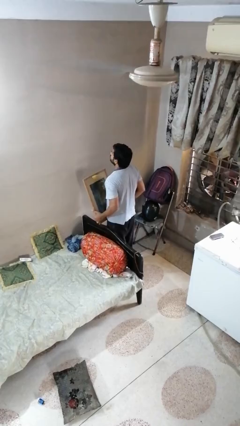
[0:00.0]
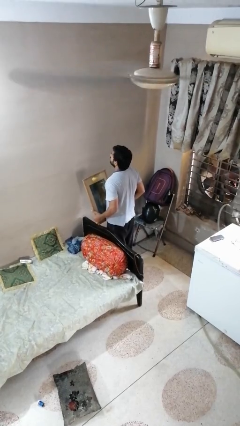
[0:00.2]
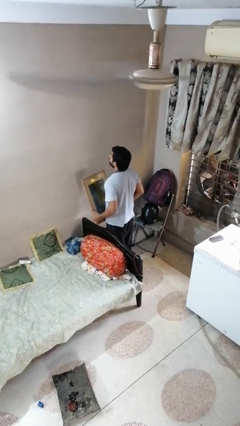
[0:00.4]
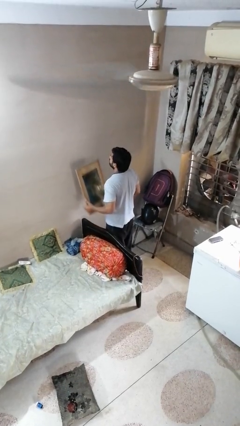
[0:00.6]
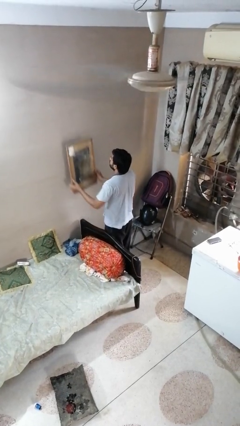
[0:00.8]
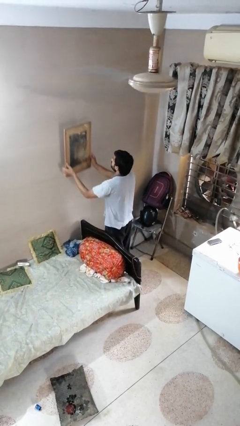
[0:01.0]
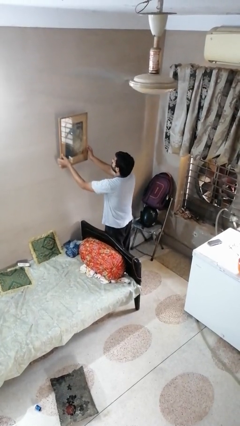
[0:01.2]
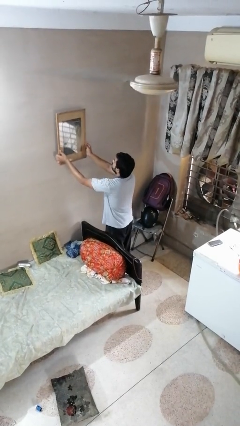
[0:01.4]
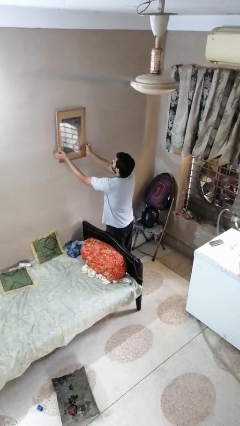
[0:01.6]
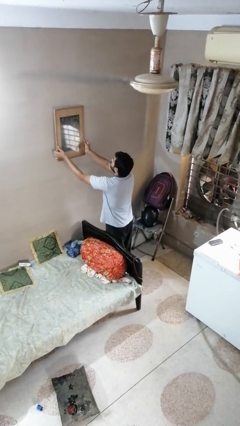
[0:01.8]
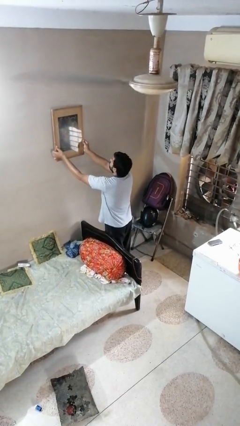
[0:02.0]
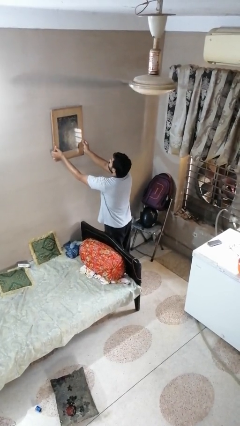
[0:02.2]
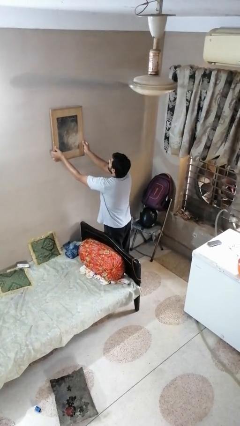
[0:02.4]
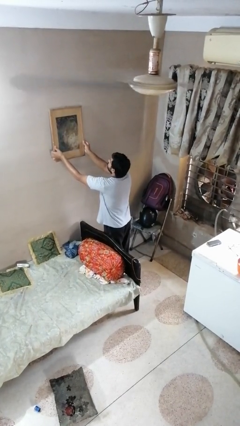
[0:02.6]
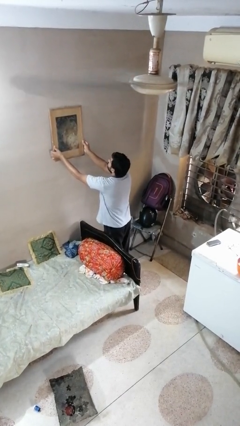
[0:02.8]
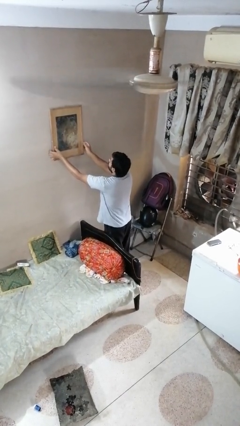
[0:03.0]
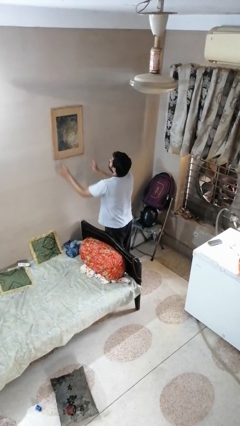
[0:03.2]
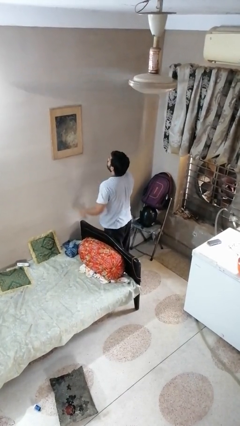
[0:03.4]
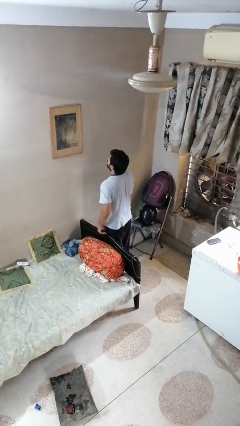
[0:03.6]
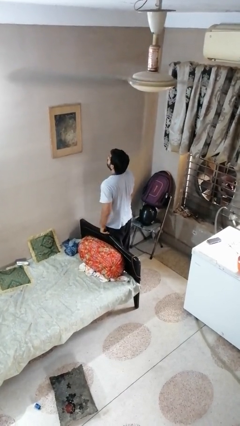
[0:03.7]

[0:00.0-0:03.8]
person puts up picture frame

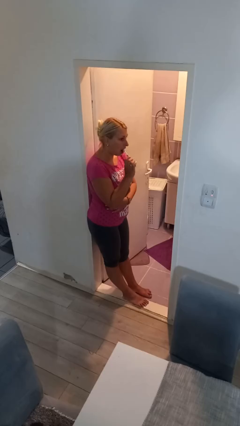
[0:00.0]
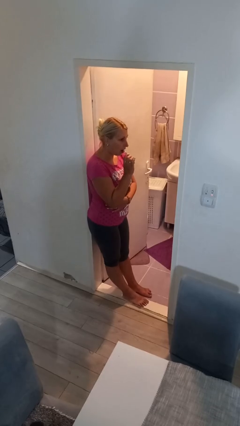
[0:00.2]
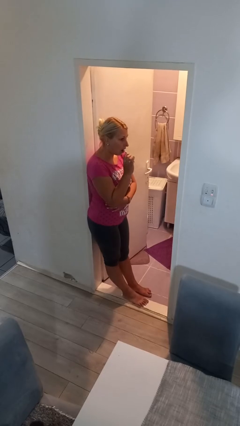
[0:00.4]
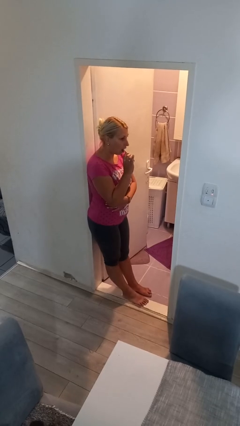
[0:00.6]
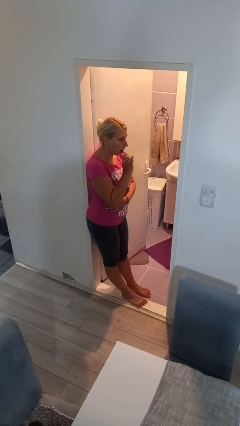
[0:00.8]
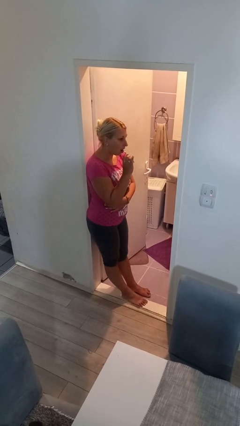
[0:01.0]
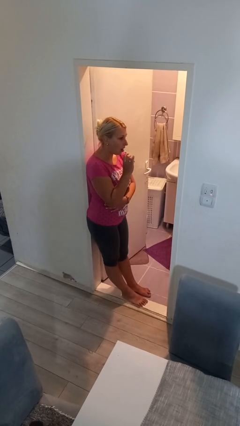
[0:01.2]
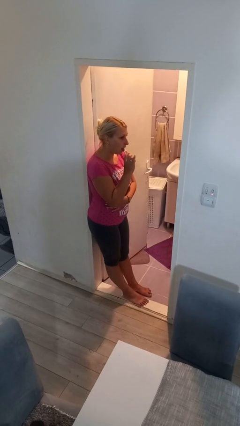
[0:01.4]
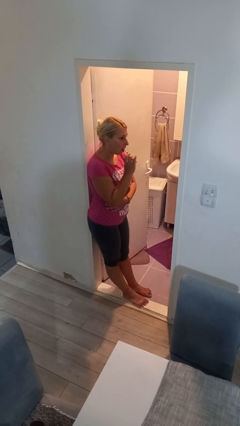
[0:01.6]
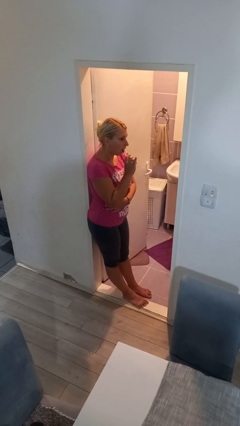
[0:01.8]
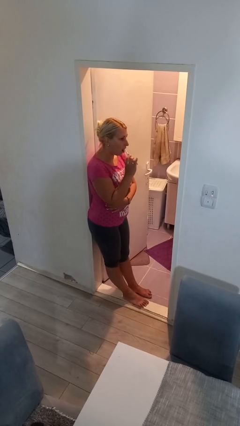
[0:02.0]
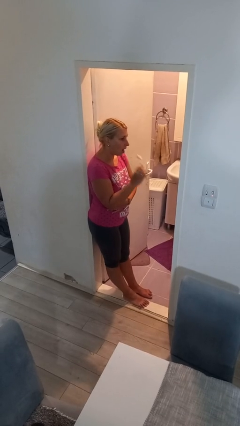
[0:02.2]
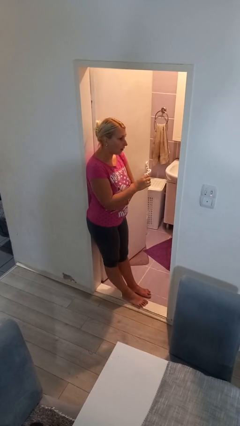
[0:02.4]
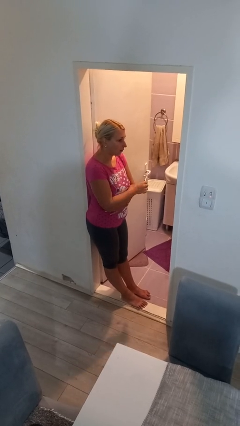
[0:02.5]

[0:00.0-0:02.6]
person brushes teeth

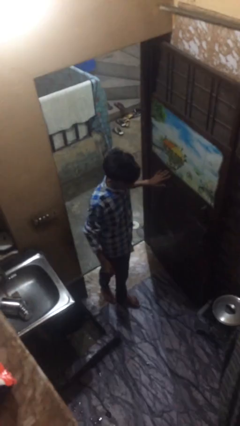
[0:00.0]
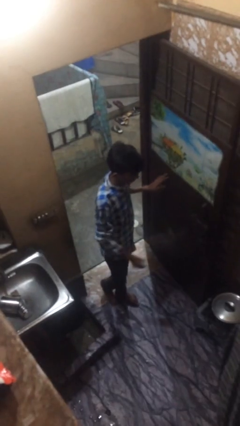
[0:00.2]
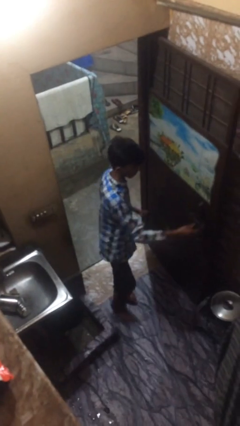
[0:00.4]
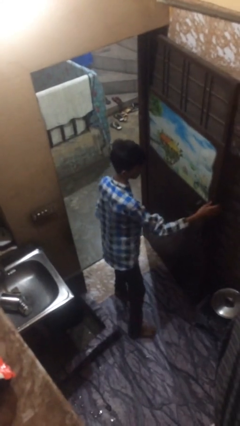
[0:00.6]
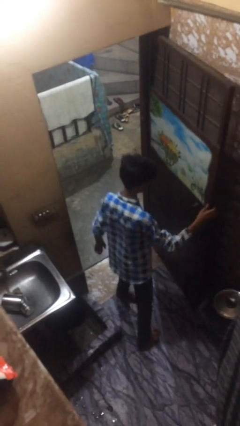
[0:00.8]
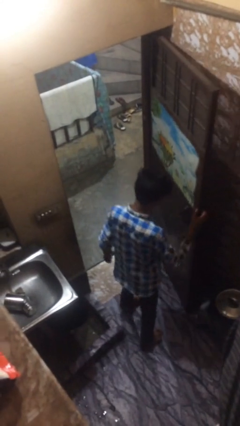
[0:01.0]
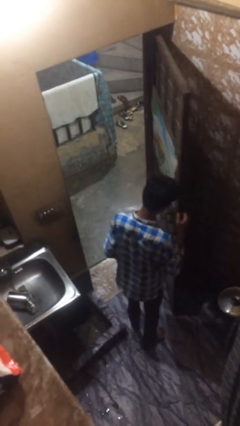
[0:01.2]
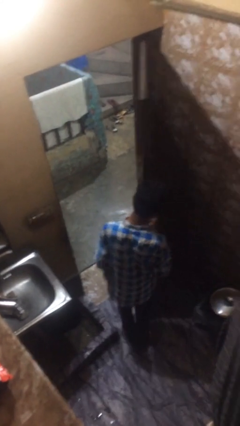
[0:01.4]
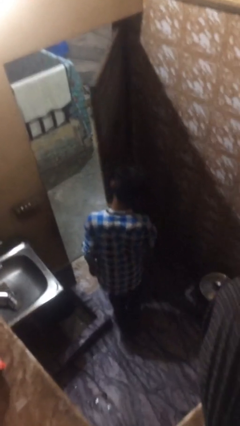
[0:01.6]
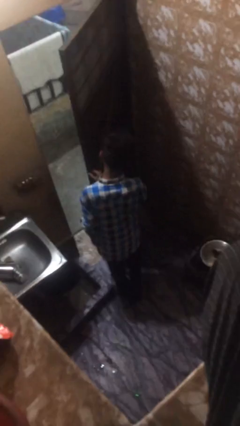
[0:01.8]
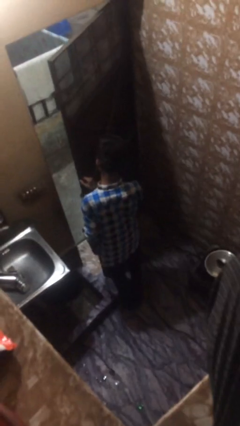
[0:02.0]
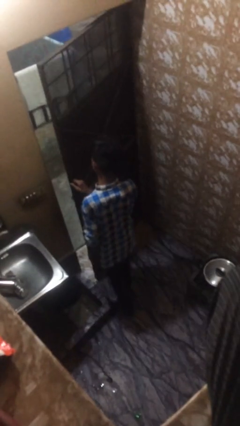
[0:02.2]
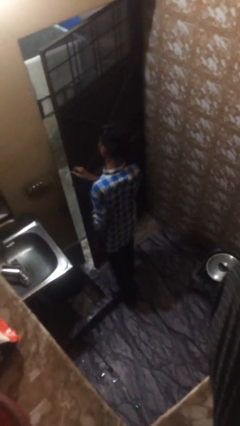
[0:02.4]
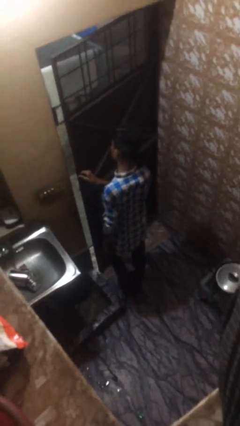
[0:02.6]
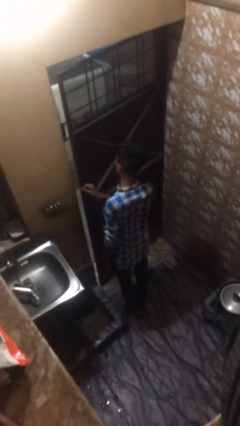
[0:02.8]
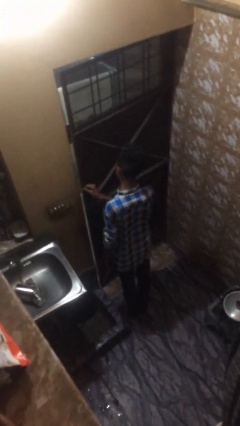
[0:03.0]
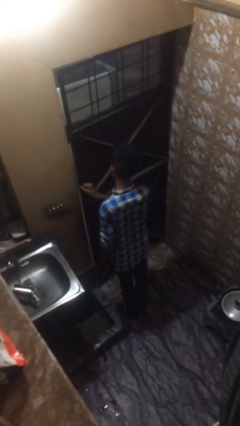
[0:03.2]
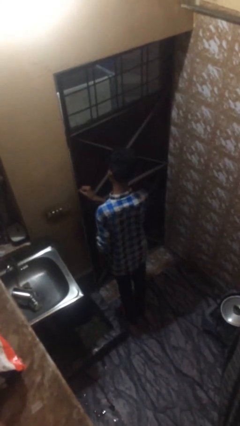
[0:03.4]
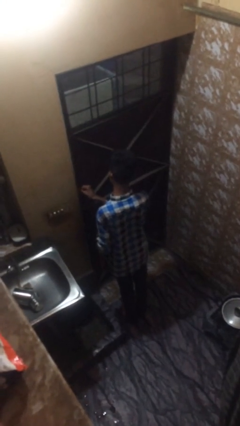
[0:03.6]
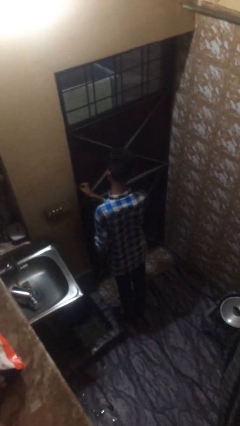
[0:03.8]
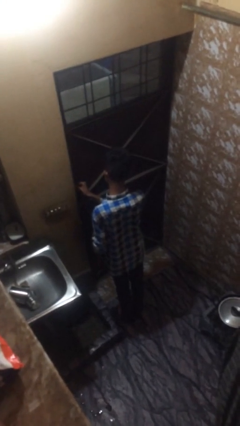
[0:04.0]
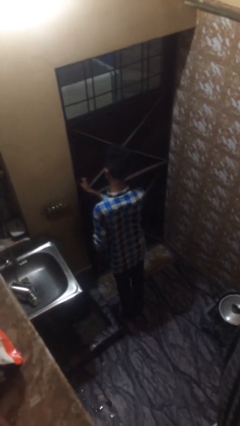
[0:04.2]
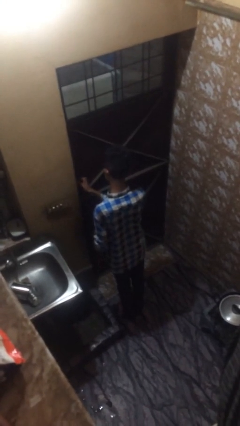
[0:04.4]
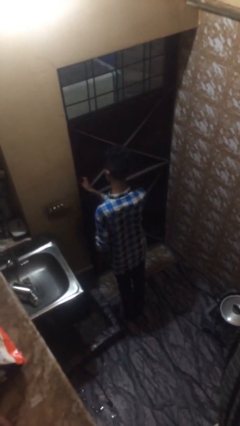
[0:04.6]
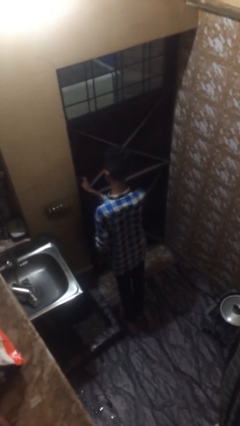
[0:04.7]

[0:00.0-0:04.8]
person closes facility door

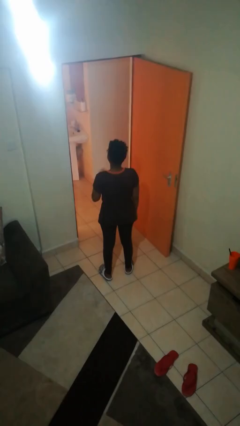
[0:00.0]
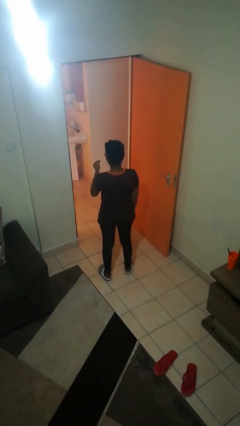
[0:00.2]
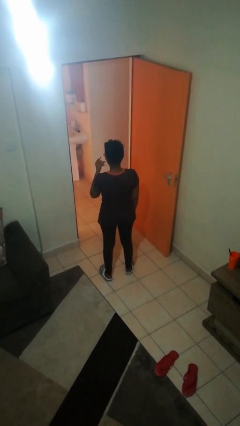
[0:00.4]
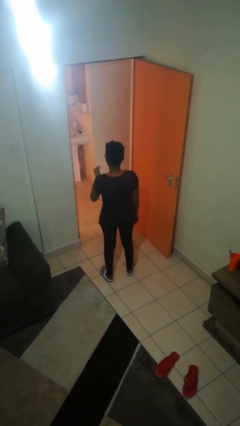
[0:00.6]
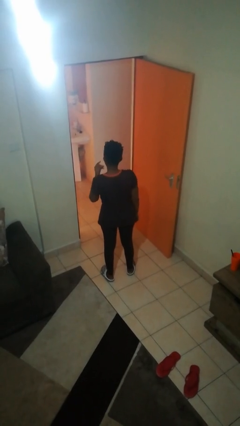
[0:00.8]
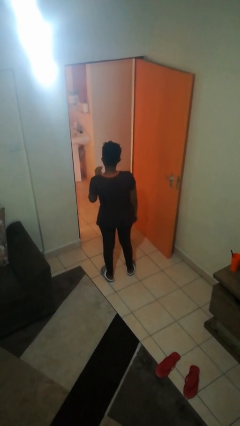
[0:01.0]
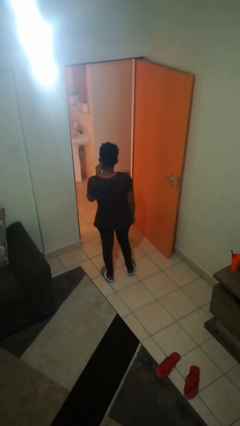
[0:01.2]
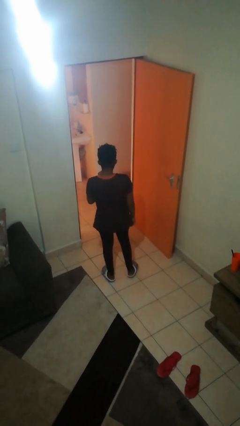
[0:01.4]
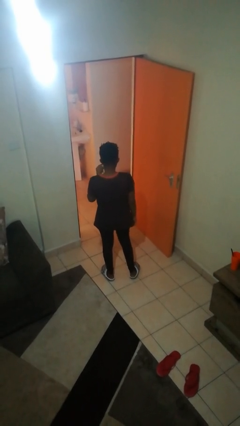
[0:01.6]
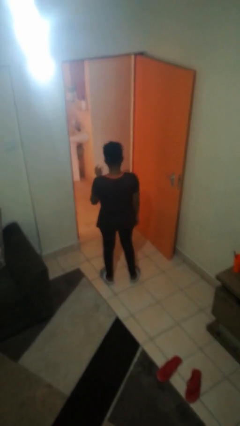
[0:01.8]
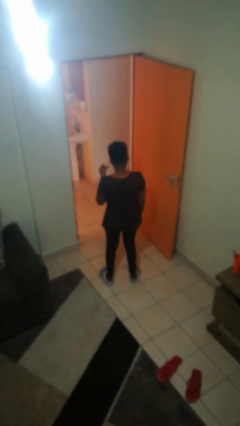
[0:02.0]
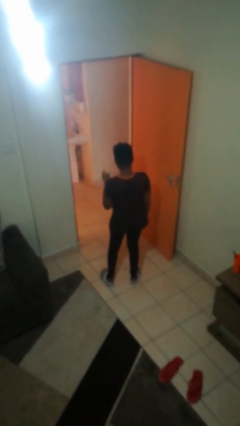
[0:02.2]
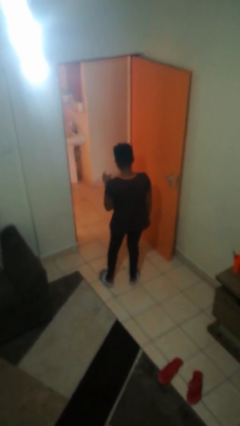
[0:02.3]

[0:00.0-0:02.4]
person snaps fingers

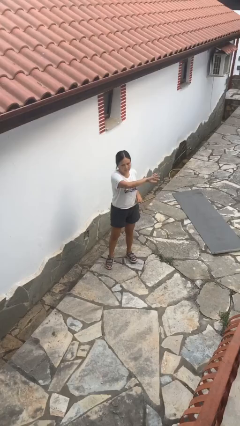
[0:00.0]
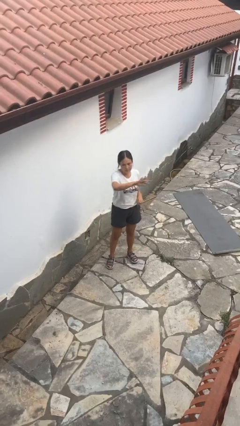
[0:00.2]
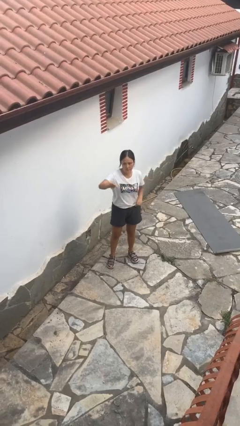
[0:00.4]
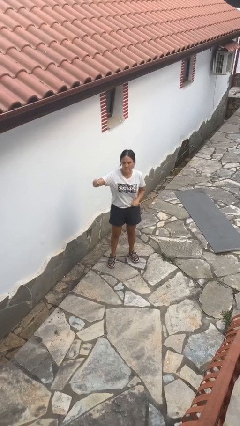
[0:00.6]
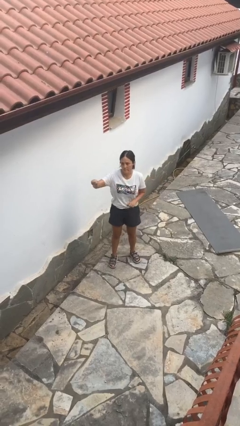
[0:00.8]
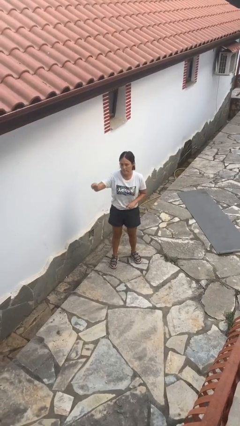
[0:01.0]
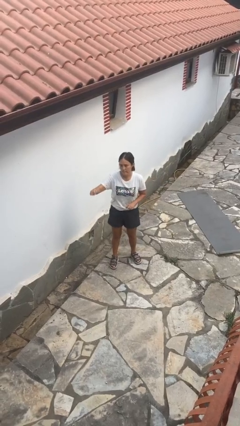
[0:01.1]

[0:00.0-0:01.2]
person gestures swipe right

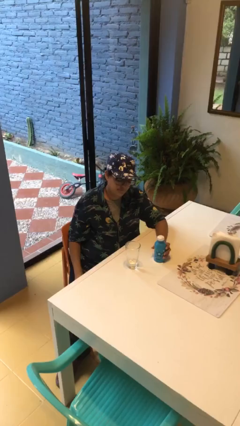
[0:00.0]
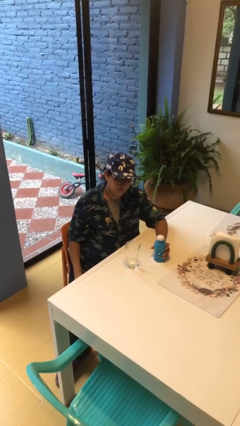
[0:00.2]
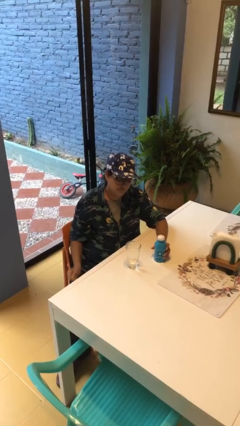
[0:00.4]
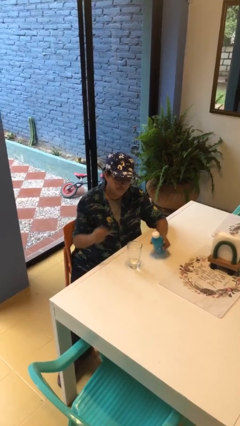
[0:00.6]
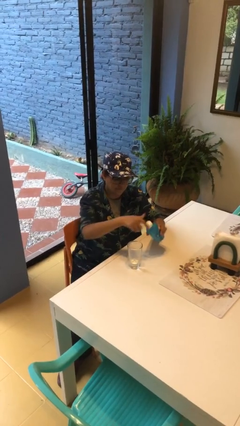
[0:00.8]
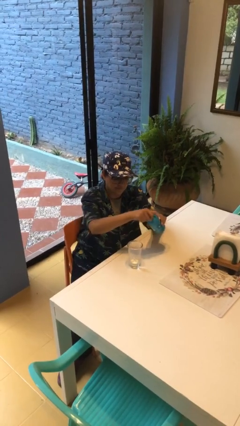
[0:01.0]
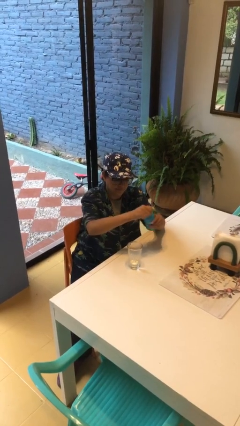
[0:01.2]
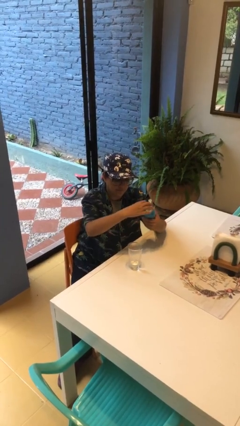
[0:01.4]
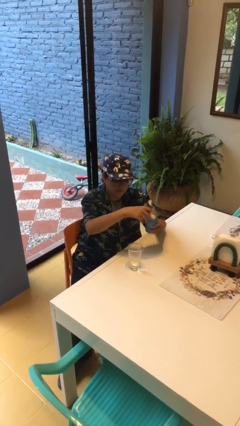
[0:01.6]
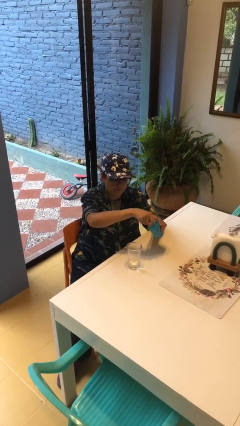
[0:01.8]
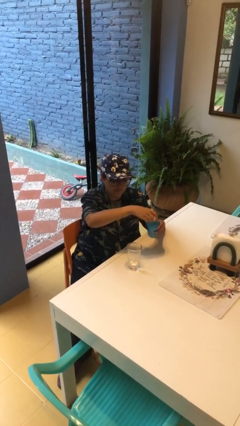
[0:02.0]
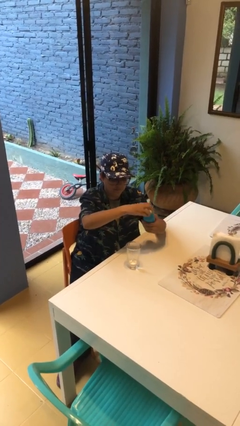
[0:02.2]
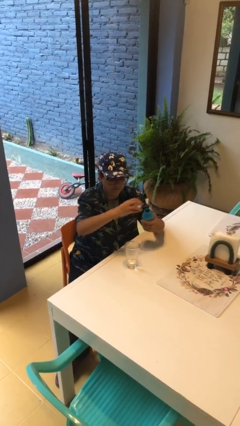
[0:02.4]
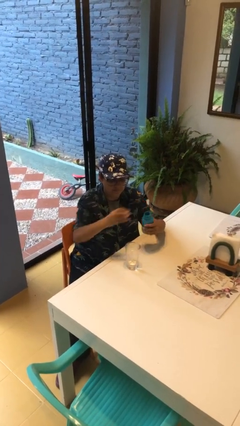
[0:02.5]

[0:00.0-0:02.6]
person unscrews lid from bottle
